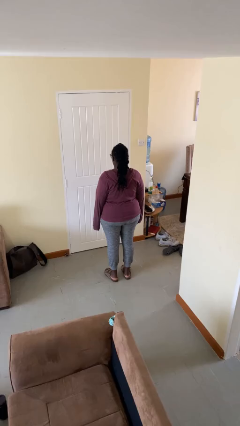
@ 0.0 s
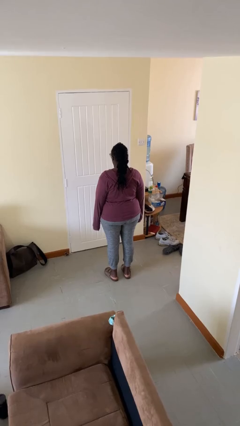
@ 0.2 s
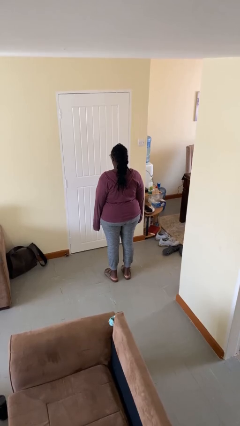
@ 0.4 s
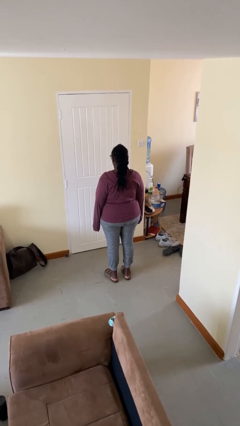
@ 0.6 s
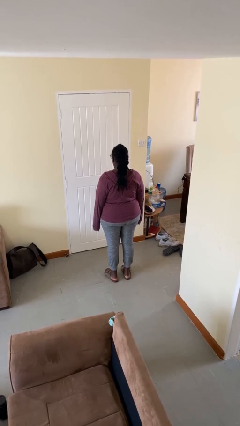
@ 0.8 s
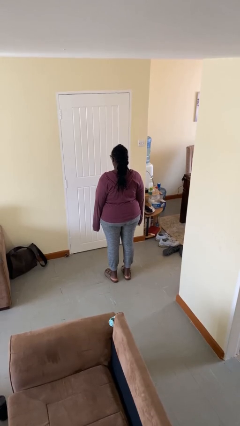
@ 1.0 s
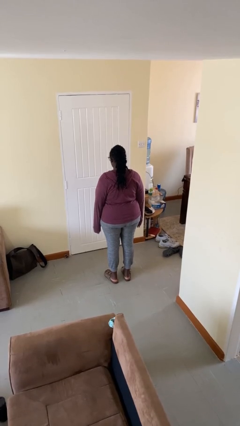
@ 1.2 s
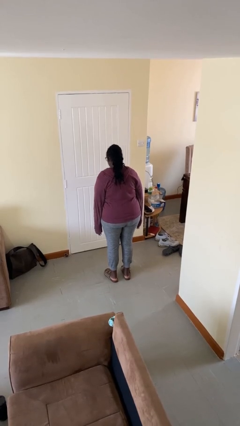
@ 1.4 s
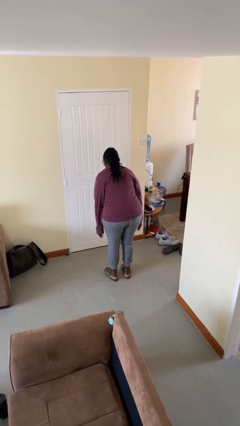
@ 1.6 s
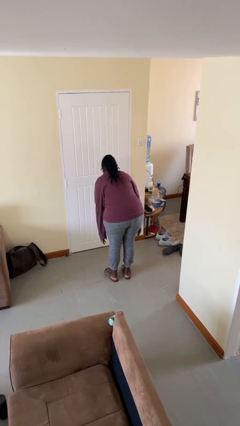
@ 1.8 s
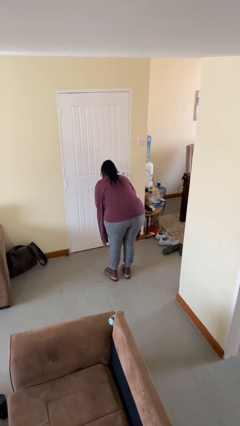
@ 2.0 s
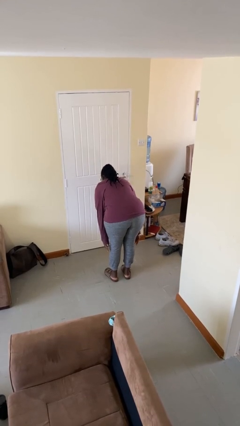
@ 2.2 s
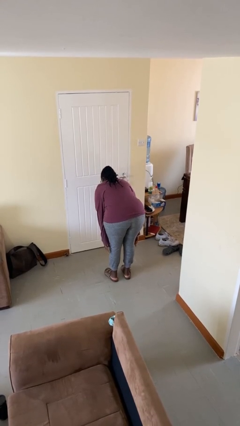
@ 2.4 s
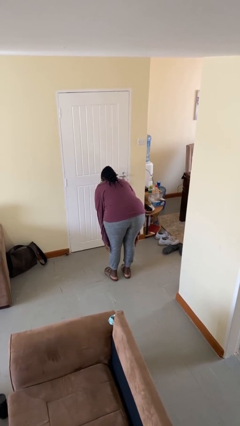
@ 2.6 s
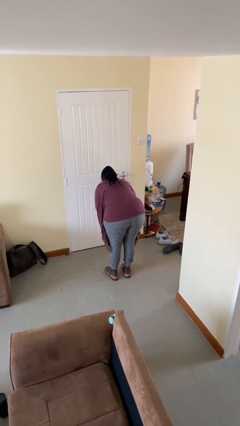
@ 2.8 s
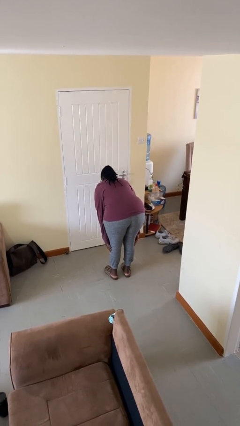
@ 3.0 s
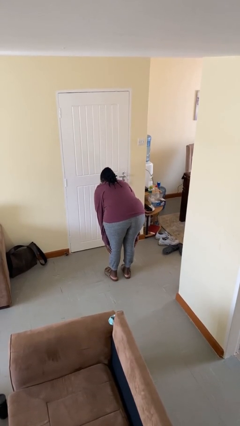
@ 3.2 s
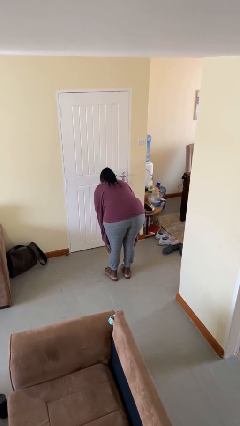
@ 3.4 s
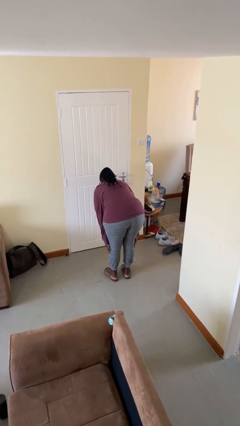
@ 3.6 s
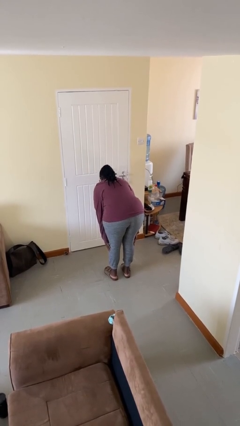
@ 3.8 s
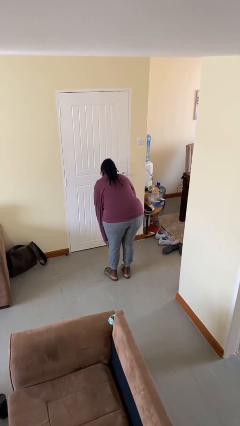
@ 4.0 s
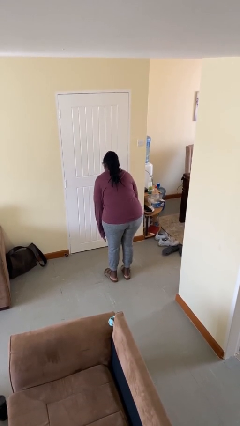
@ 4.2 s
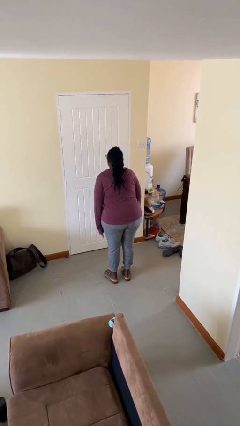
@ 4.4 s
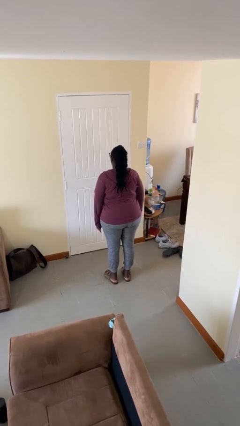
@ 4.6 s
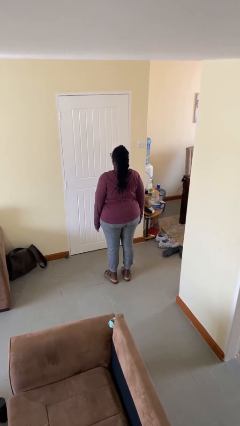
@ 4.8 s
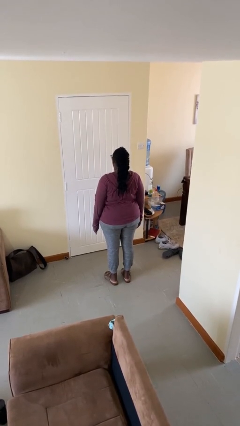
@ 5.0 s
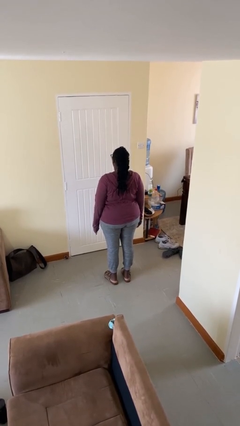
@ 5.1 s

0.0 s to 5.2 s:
person bows

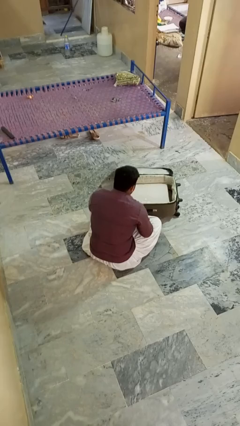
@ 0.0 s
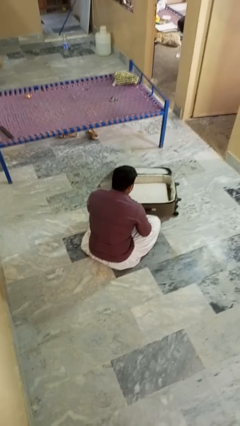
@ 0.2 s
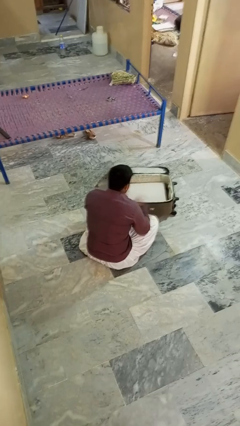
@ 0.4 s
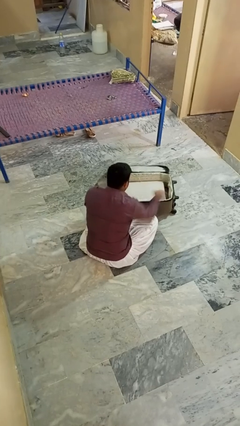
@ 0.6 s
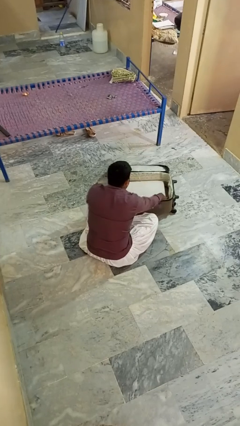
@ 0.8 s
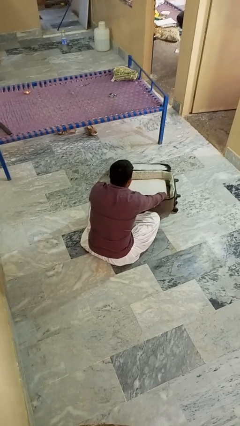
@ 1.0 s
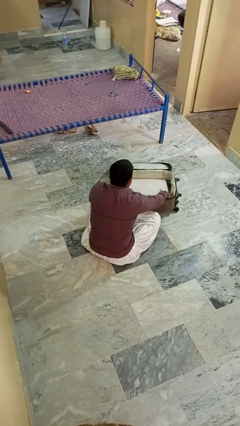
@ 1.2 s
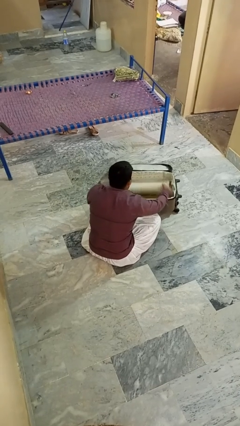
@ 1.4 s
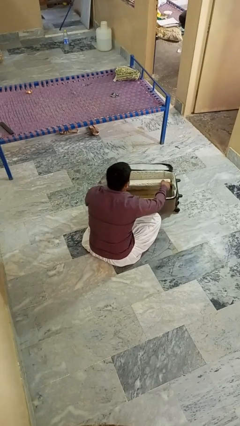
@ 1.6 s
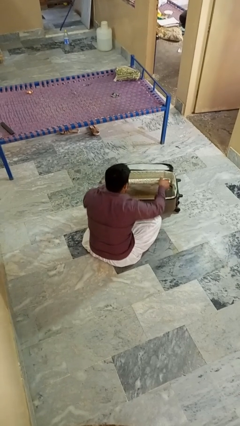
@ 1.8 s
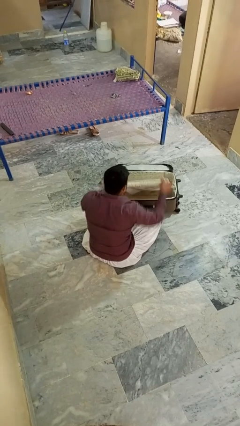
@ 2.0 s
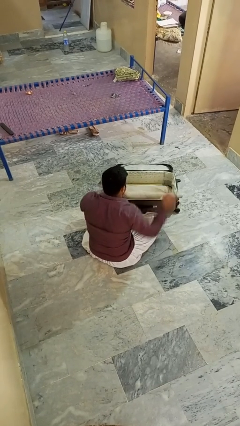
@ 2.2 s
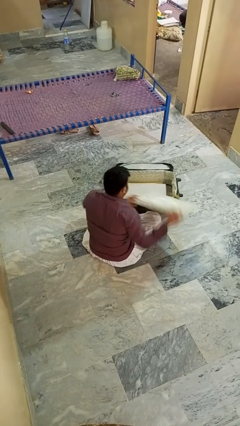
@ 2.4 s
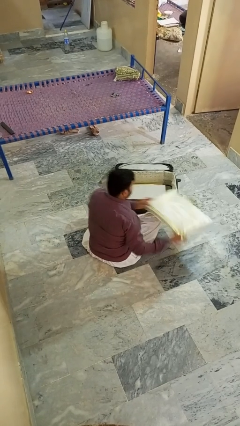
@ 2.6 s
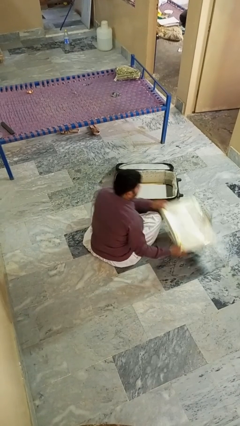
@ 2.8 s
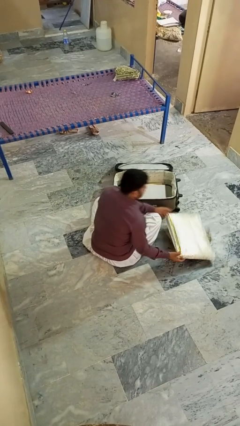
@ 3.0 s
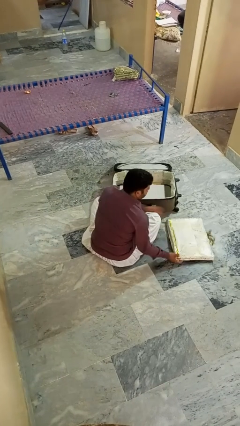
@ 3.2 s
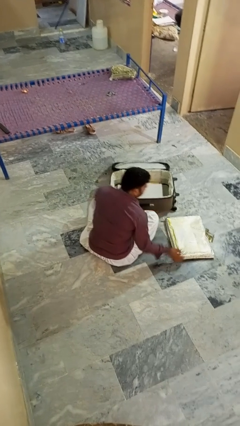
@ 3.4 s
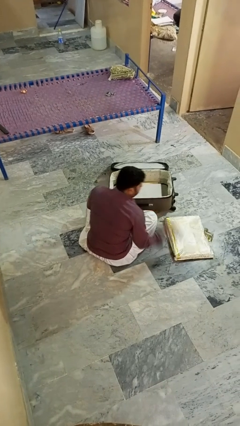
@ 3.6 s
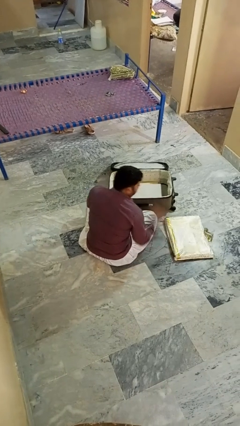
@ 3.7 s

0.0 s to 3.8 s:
person takes object from bag

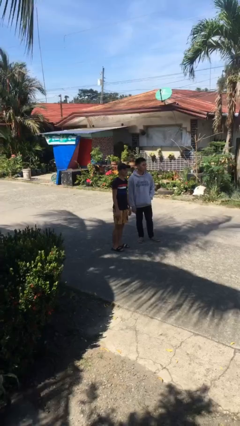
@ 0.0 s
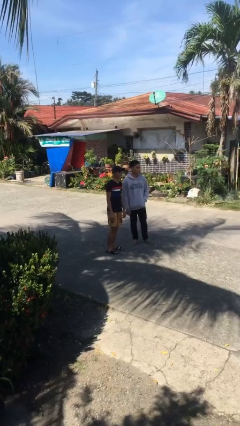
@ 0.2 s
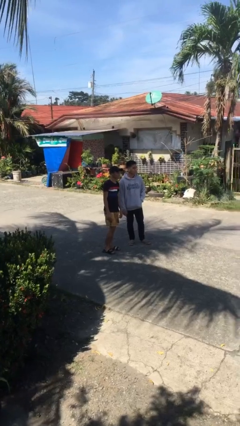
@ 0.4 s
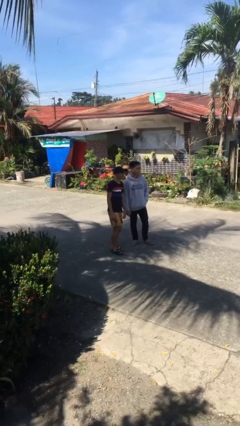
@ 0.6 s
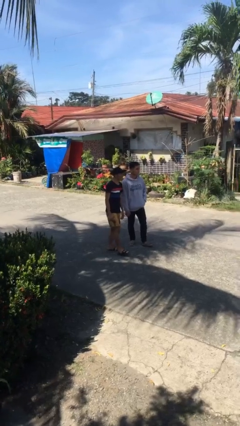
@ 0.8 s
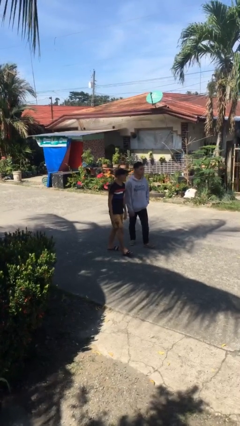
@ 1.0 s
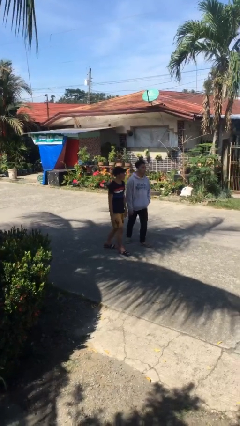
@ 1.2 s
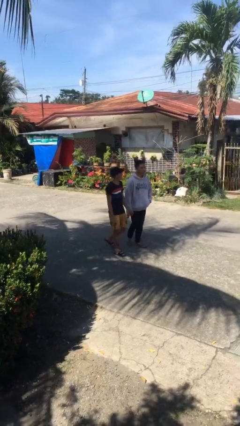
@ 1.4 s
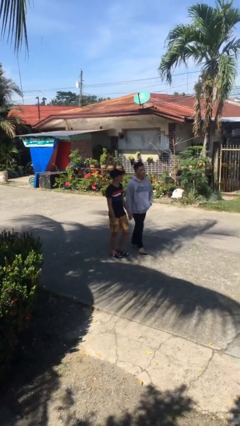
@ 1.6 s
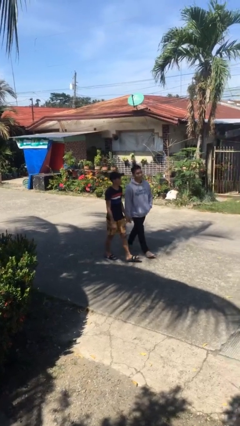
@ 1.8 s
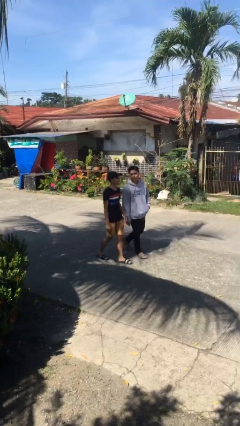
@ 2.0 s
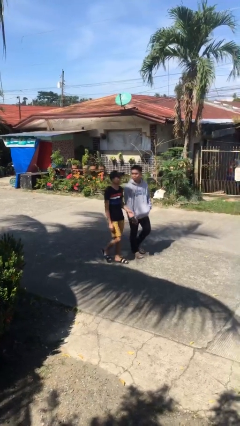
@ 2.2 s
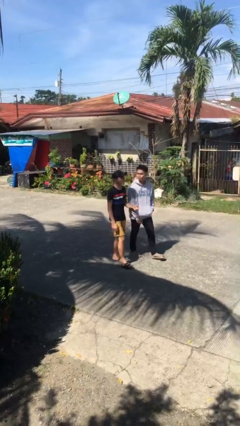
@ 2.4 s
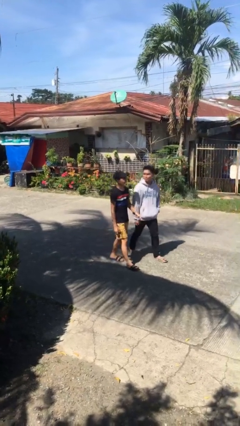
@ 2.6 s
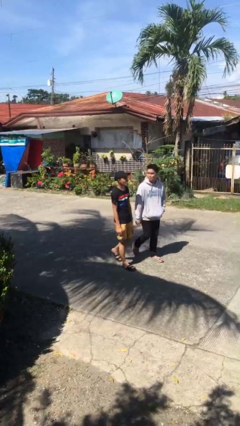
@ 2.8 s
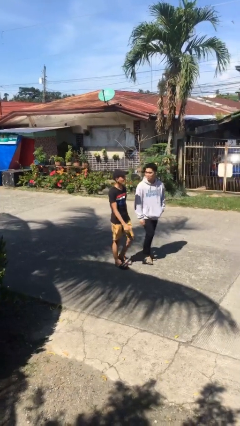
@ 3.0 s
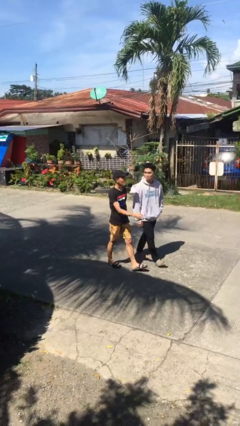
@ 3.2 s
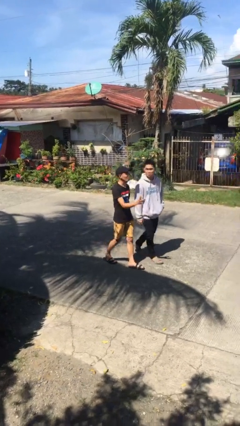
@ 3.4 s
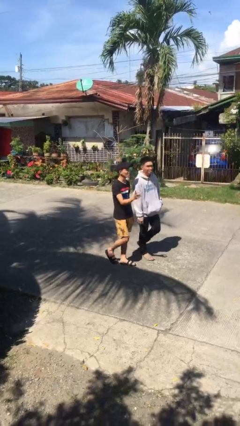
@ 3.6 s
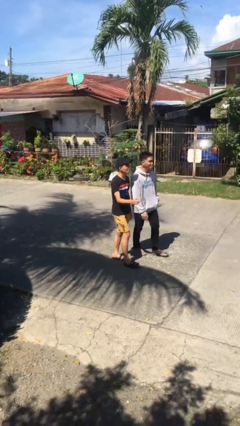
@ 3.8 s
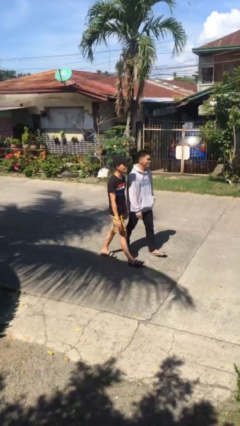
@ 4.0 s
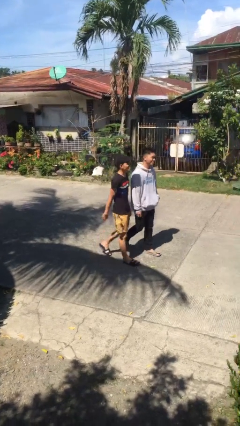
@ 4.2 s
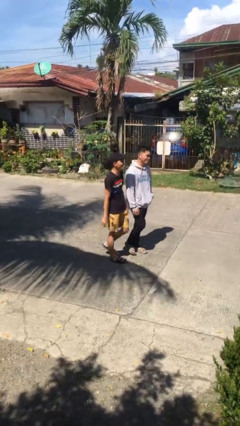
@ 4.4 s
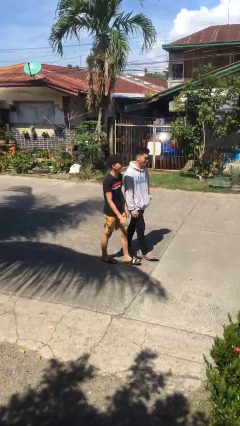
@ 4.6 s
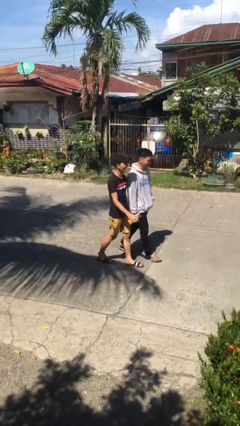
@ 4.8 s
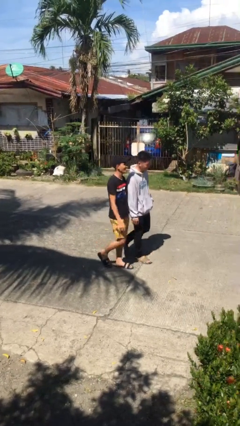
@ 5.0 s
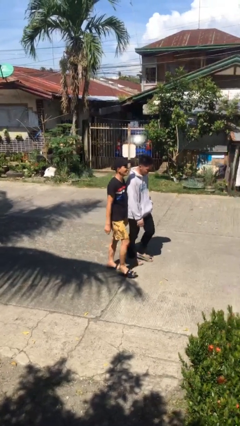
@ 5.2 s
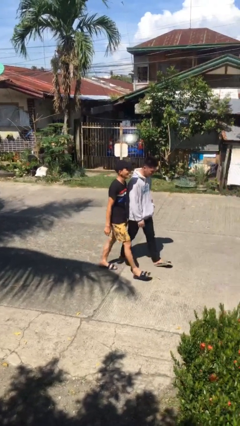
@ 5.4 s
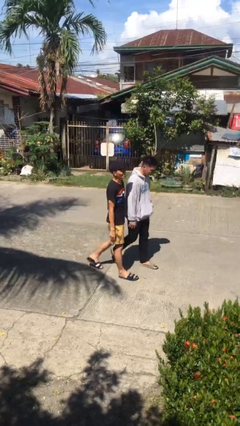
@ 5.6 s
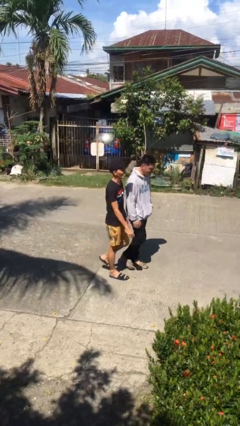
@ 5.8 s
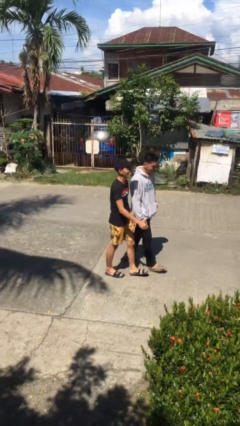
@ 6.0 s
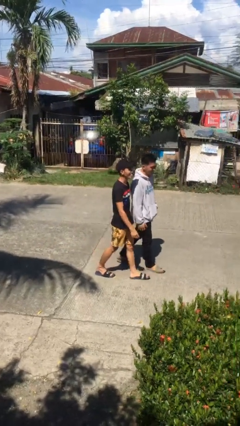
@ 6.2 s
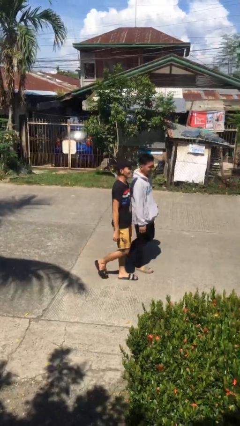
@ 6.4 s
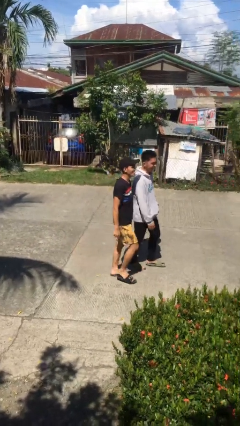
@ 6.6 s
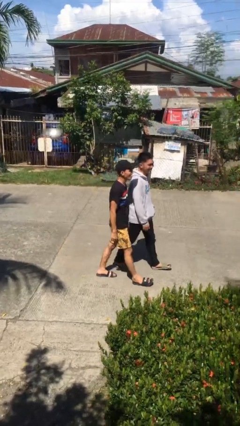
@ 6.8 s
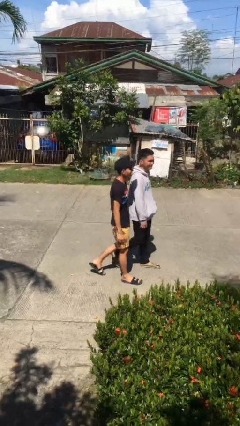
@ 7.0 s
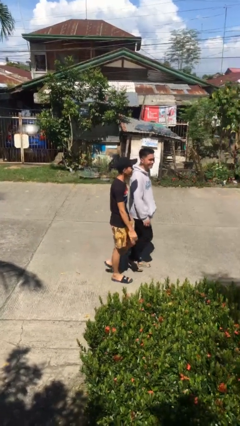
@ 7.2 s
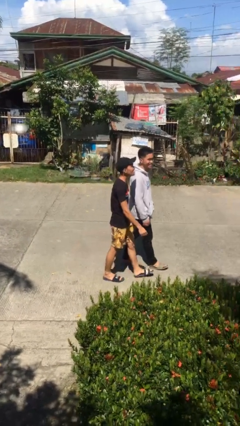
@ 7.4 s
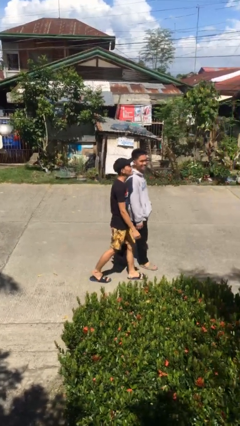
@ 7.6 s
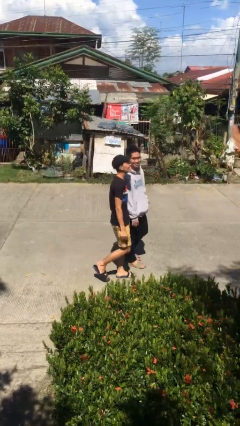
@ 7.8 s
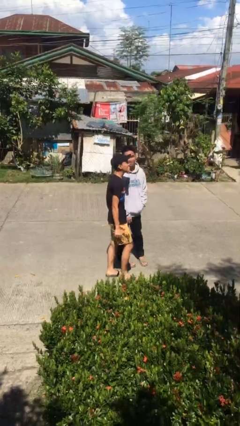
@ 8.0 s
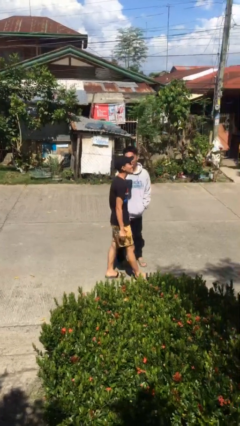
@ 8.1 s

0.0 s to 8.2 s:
person talks to person

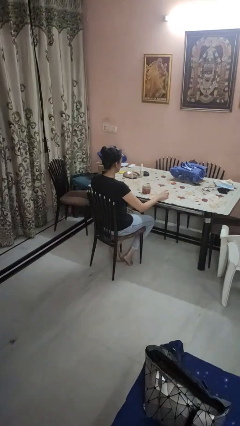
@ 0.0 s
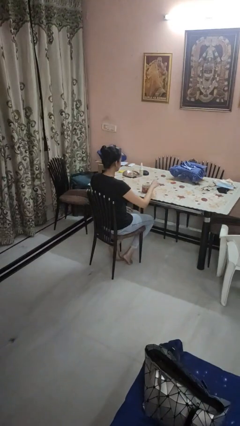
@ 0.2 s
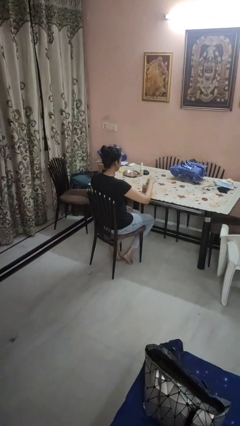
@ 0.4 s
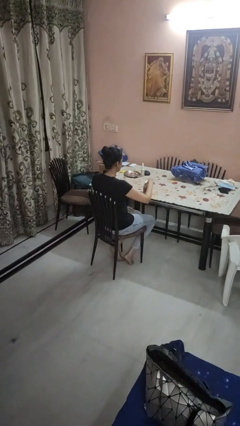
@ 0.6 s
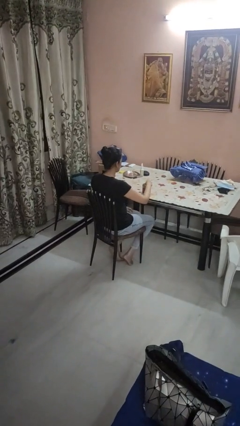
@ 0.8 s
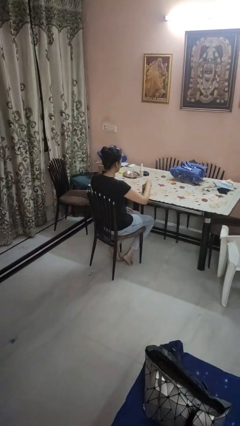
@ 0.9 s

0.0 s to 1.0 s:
person closes jar
